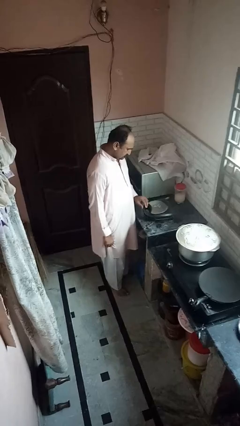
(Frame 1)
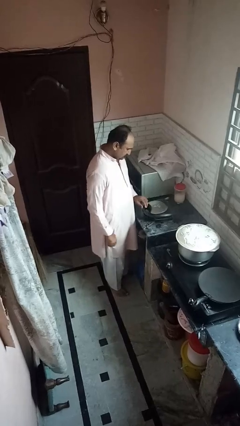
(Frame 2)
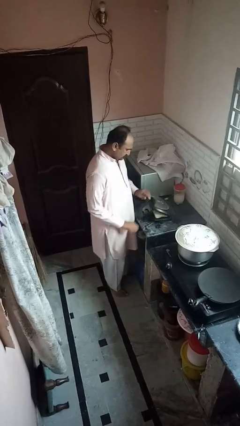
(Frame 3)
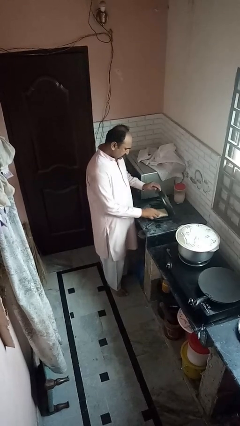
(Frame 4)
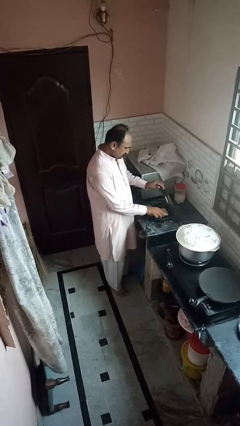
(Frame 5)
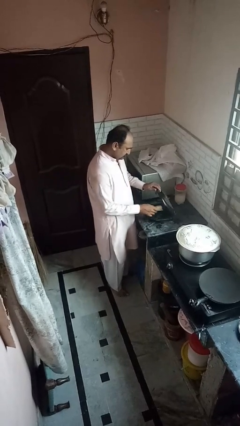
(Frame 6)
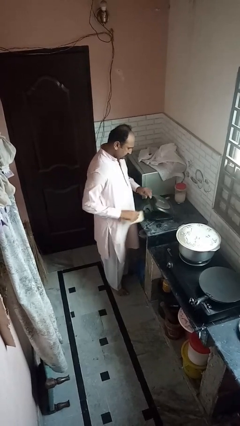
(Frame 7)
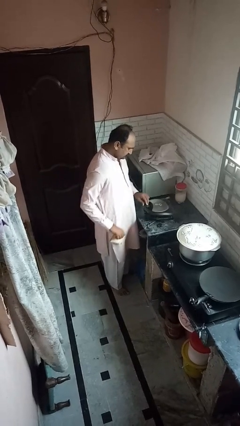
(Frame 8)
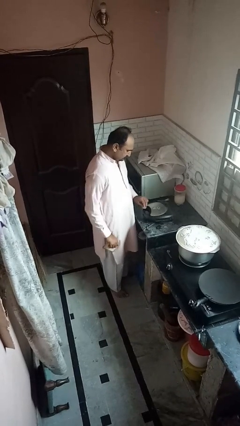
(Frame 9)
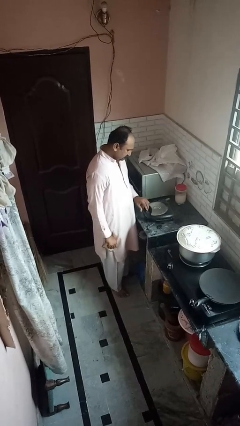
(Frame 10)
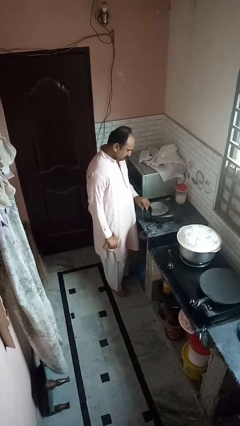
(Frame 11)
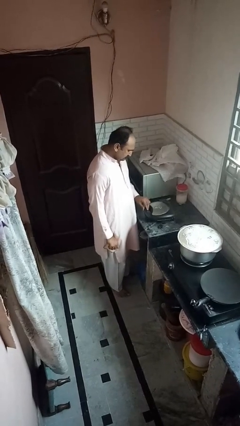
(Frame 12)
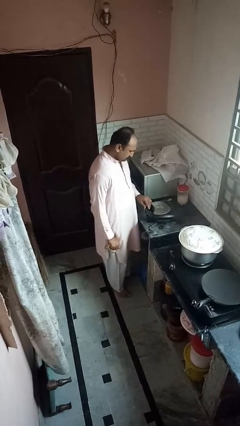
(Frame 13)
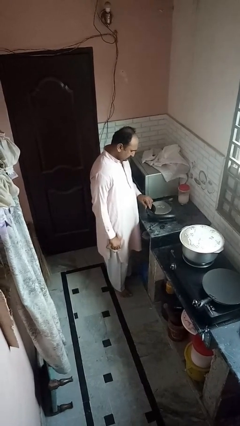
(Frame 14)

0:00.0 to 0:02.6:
person takes object from toaster

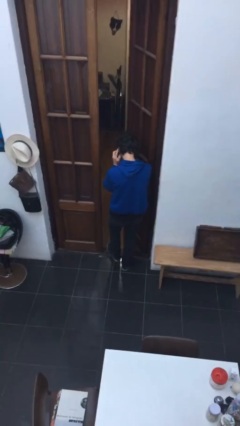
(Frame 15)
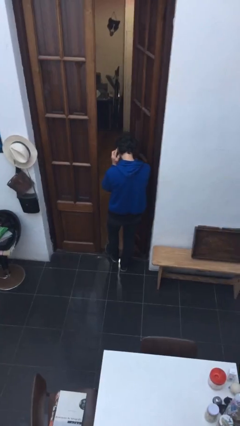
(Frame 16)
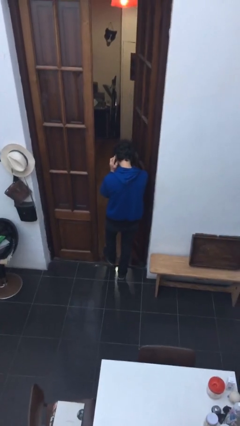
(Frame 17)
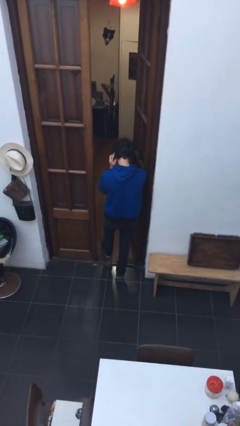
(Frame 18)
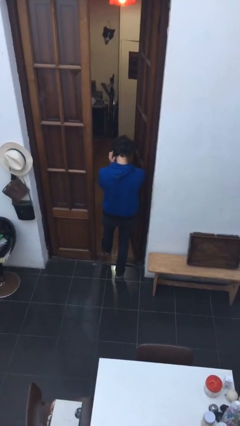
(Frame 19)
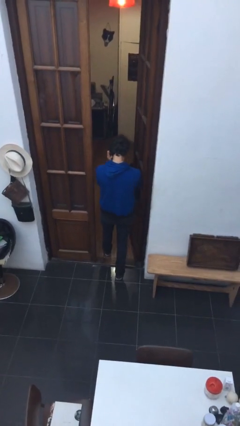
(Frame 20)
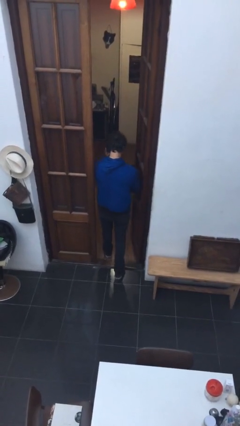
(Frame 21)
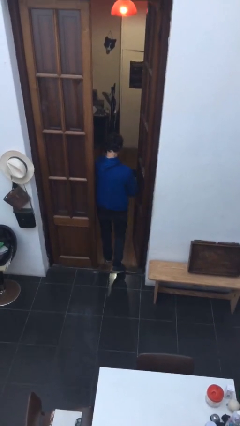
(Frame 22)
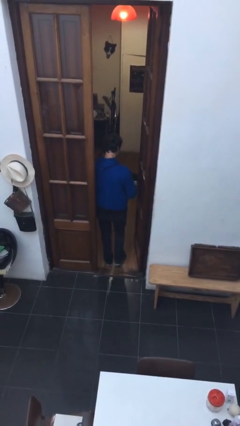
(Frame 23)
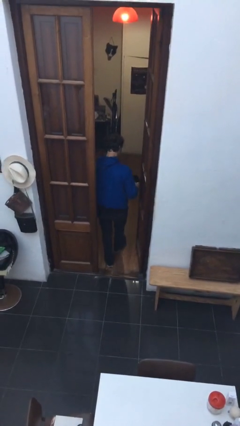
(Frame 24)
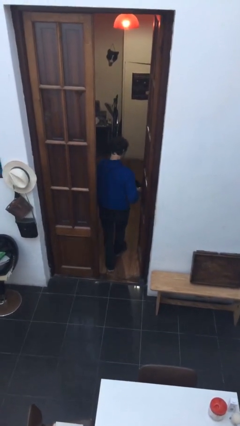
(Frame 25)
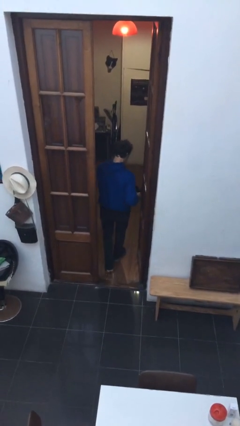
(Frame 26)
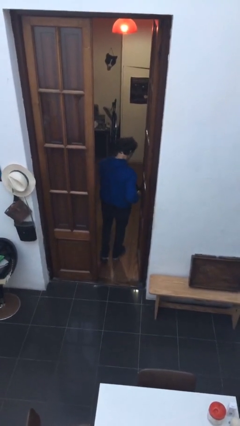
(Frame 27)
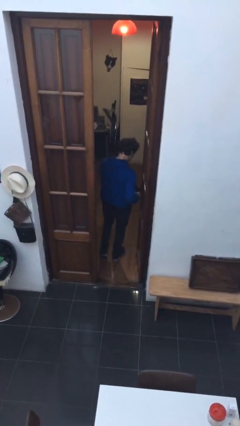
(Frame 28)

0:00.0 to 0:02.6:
person exits scene through structure

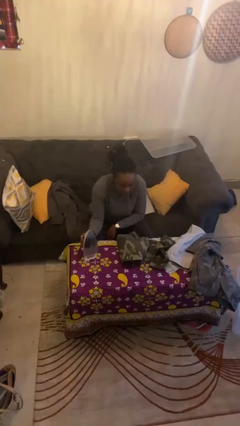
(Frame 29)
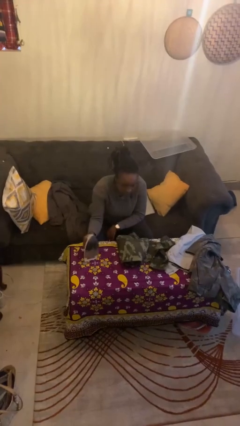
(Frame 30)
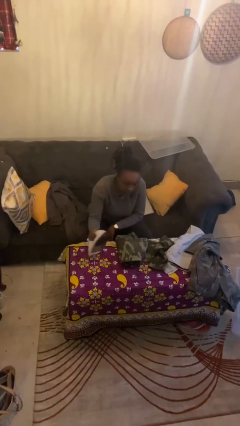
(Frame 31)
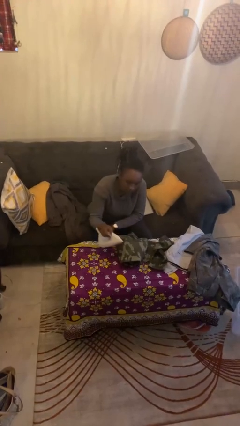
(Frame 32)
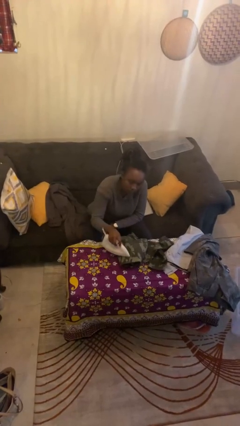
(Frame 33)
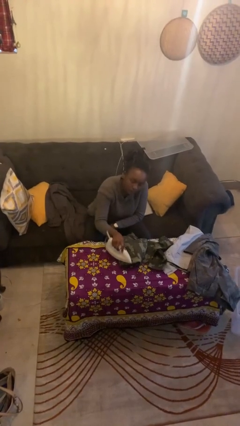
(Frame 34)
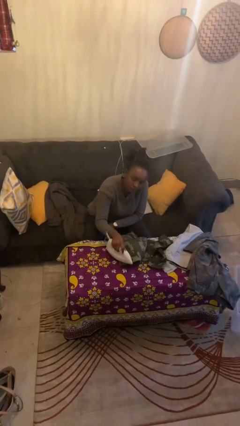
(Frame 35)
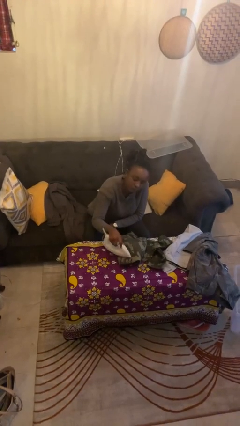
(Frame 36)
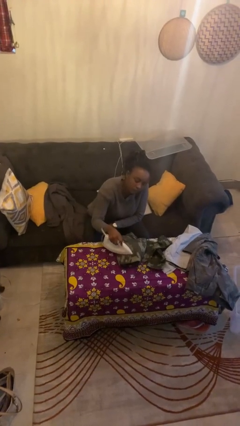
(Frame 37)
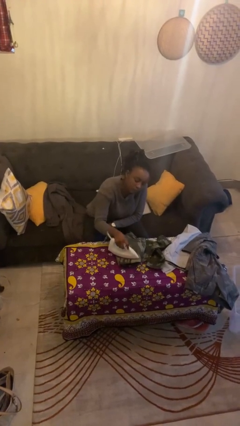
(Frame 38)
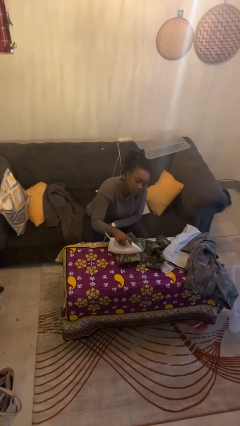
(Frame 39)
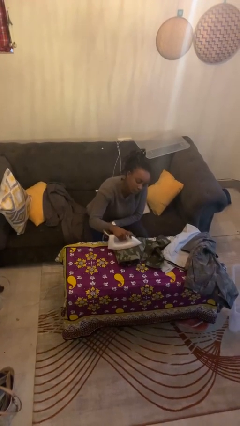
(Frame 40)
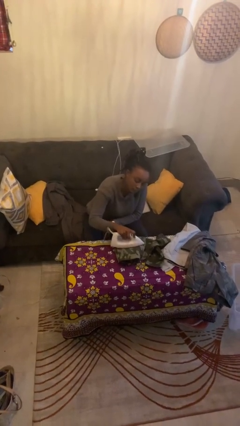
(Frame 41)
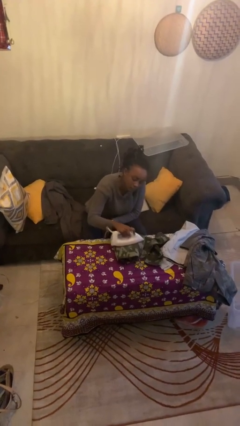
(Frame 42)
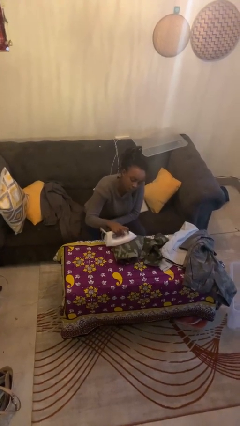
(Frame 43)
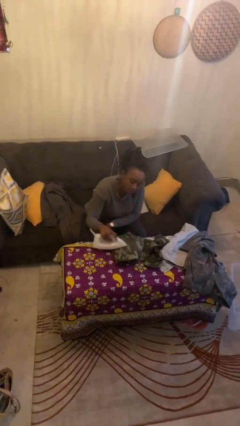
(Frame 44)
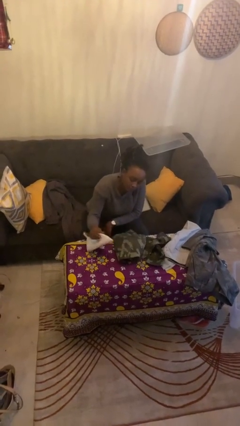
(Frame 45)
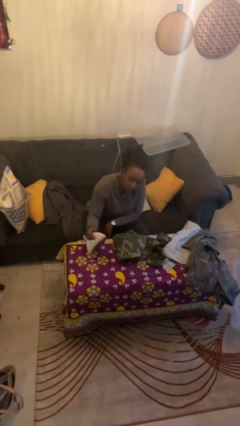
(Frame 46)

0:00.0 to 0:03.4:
person irons clothes

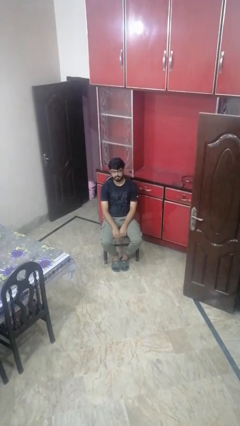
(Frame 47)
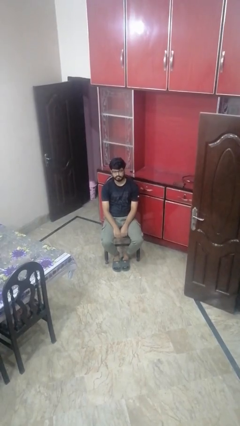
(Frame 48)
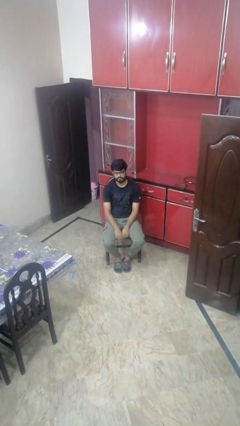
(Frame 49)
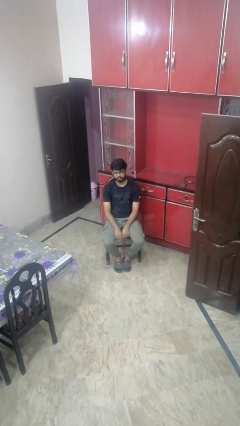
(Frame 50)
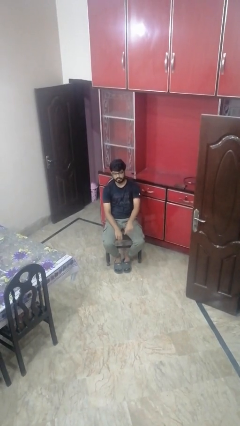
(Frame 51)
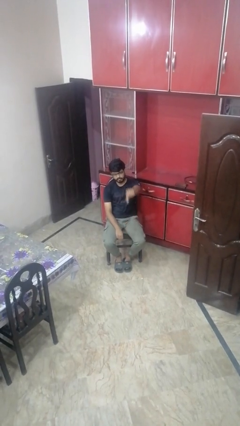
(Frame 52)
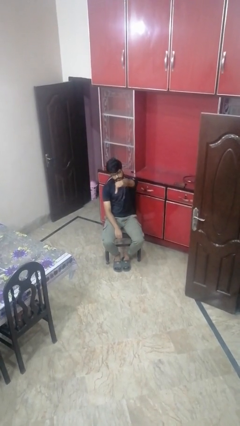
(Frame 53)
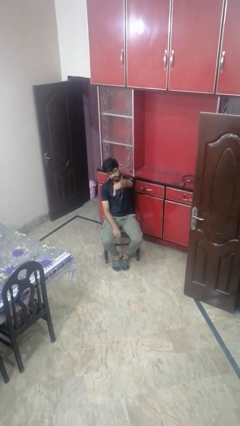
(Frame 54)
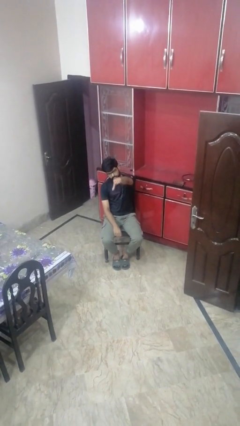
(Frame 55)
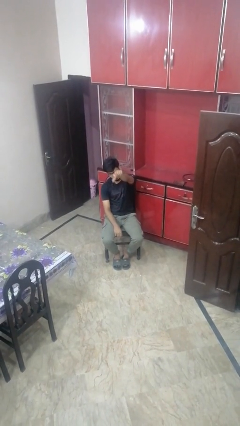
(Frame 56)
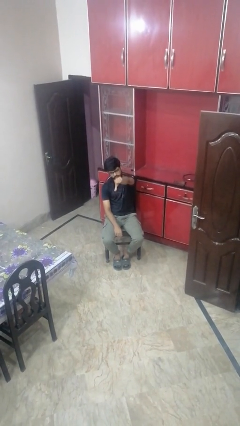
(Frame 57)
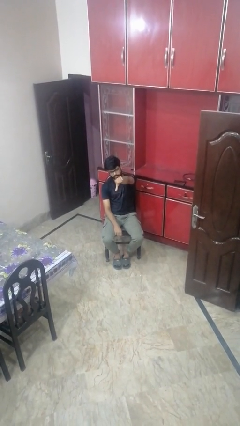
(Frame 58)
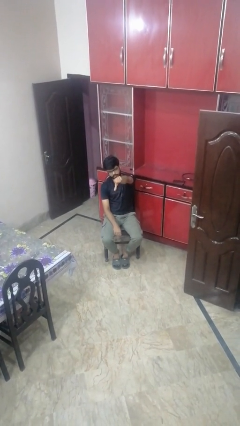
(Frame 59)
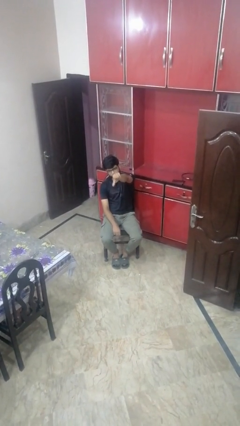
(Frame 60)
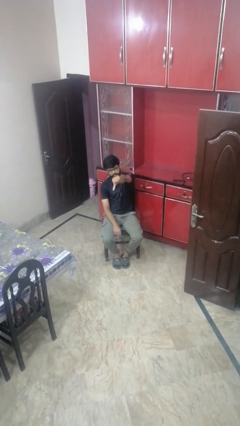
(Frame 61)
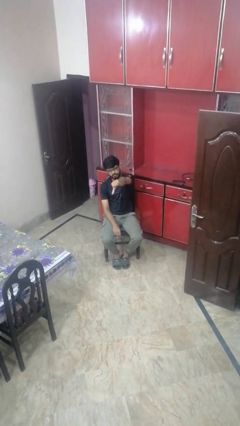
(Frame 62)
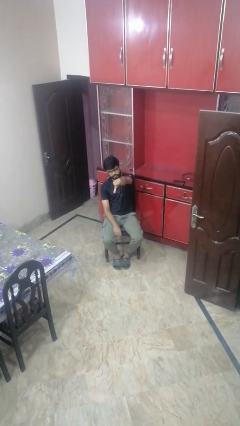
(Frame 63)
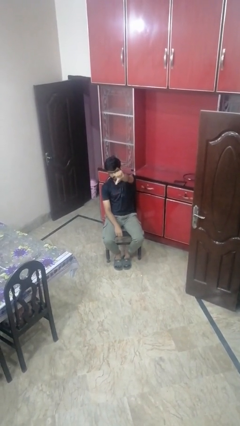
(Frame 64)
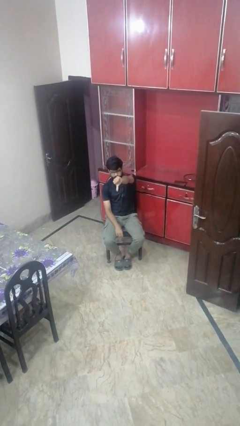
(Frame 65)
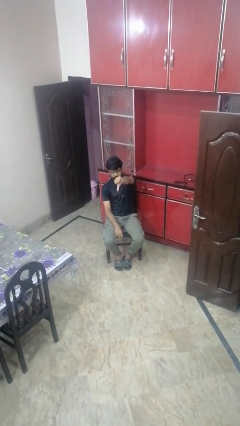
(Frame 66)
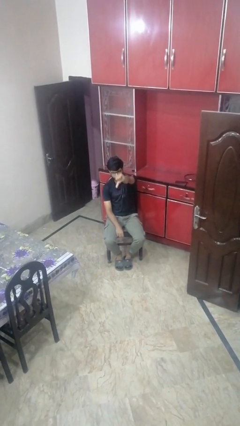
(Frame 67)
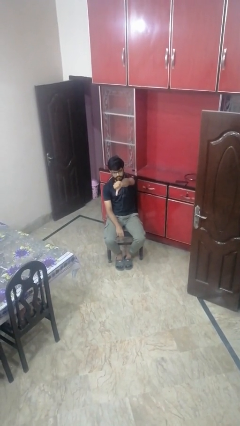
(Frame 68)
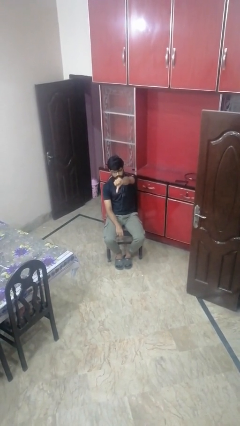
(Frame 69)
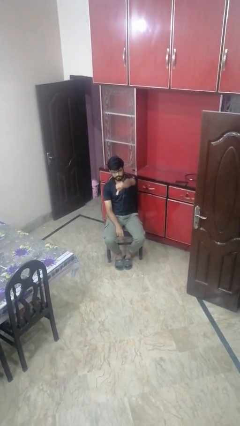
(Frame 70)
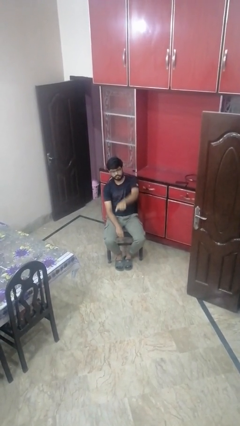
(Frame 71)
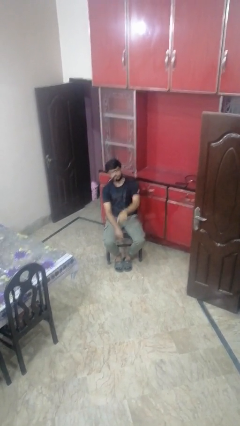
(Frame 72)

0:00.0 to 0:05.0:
person gestures thumbs down

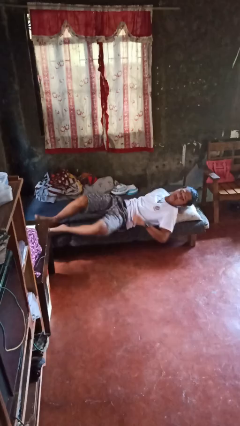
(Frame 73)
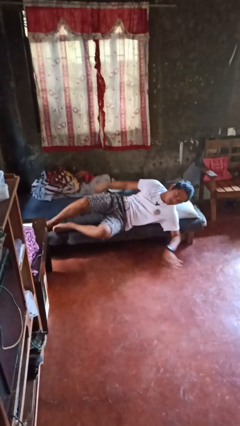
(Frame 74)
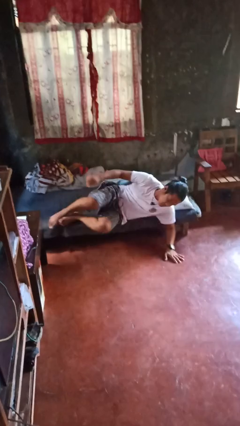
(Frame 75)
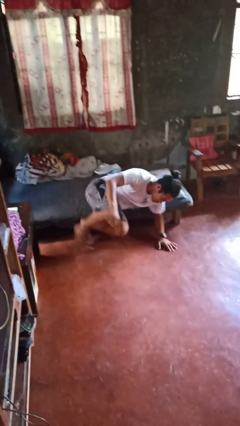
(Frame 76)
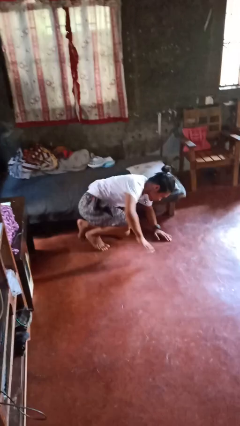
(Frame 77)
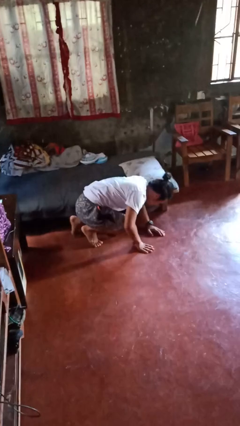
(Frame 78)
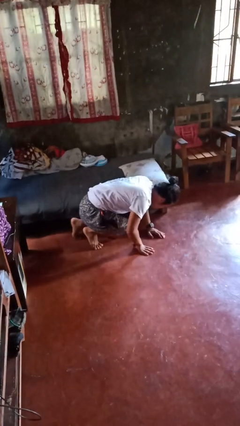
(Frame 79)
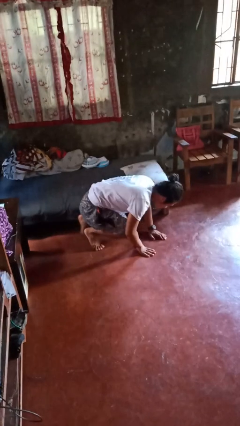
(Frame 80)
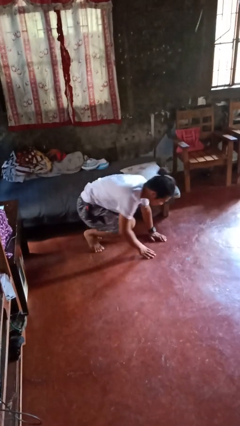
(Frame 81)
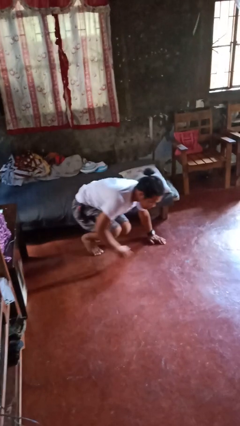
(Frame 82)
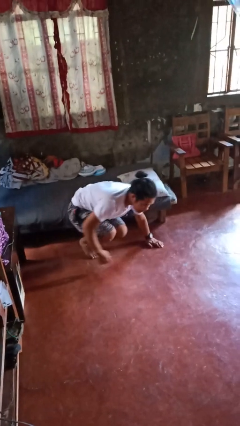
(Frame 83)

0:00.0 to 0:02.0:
person falls from bed

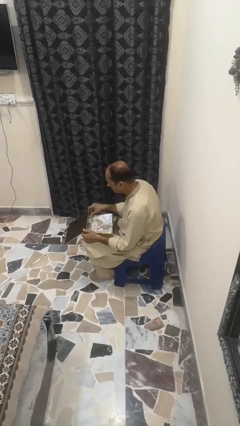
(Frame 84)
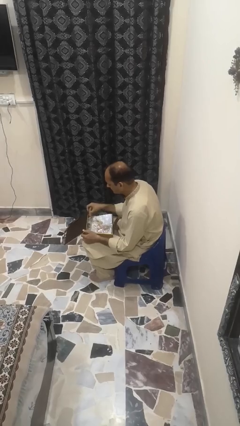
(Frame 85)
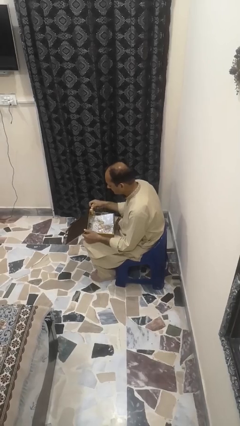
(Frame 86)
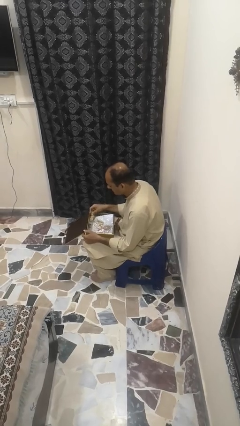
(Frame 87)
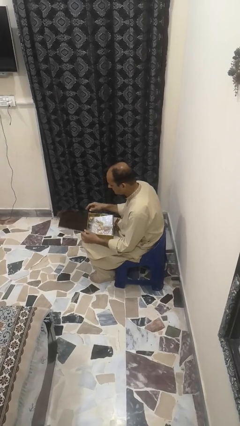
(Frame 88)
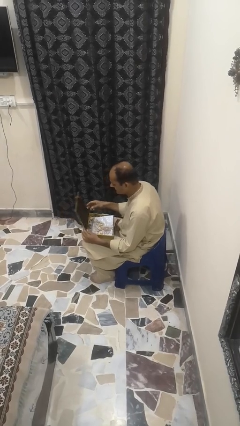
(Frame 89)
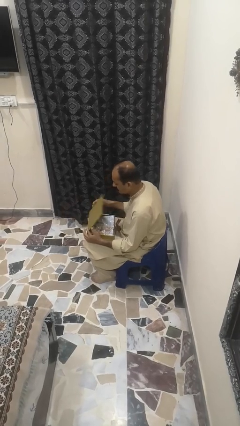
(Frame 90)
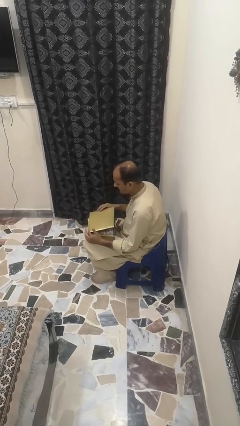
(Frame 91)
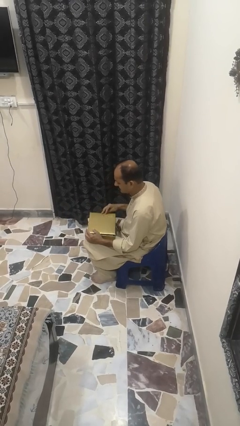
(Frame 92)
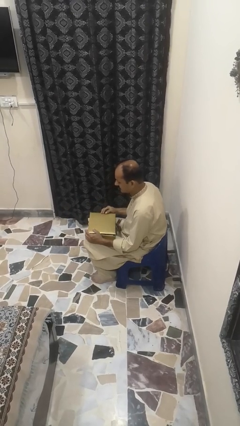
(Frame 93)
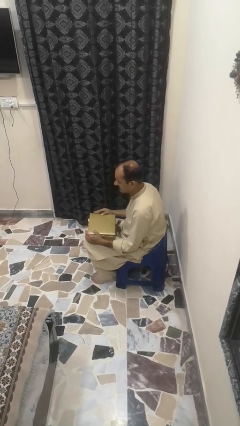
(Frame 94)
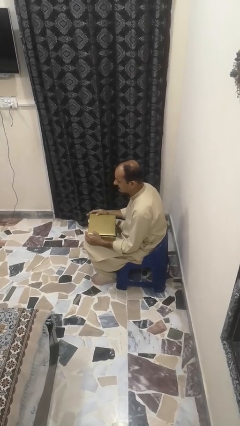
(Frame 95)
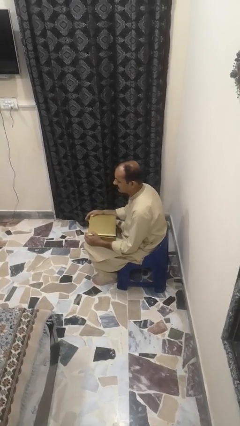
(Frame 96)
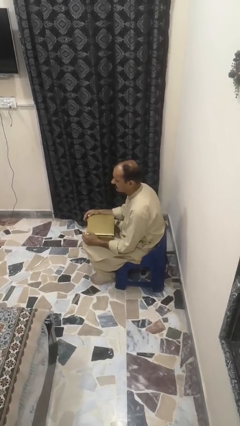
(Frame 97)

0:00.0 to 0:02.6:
person closes jewelry box
